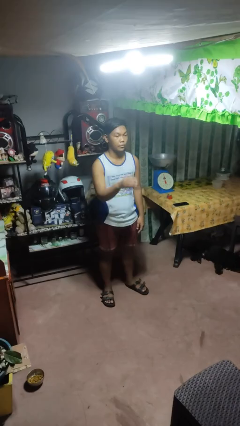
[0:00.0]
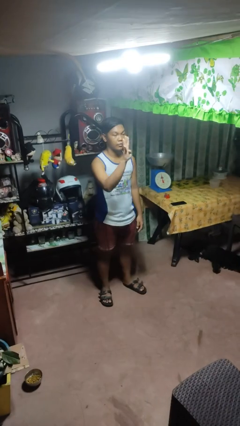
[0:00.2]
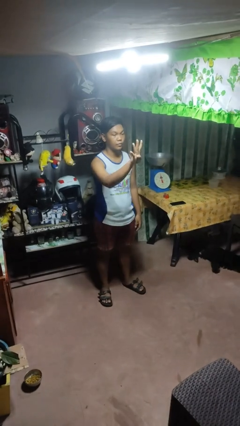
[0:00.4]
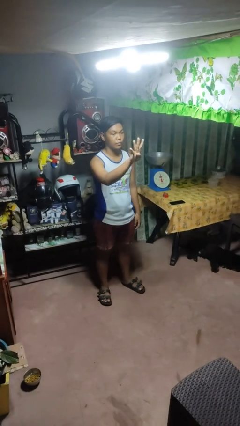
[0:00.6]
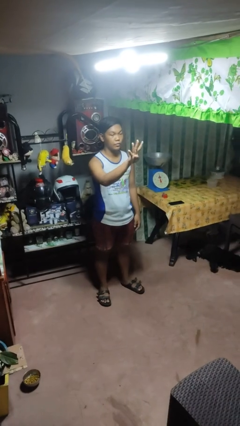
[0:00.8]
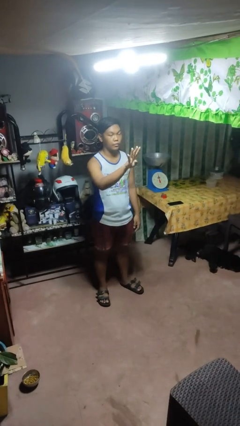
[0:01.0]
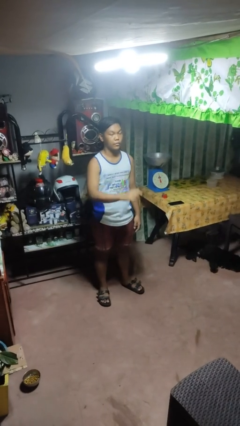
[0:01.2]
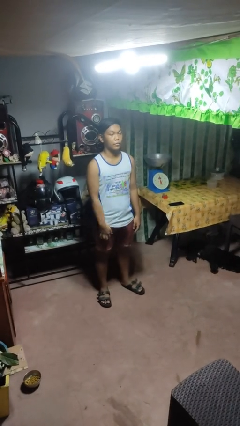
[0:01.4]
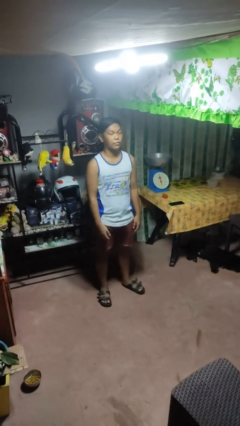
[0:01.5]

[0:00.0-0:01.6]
person gestures number four

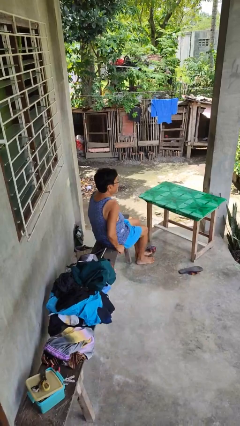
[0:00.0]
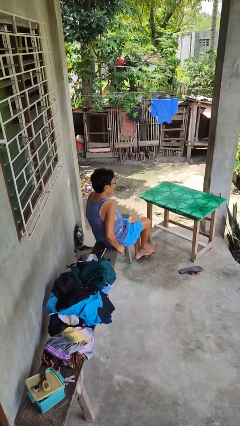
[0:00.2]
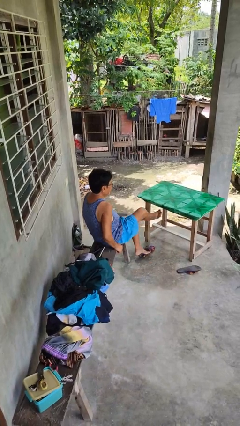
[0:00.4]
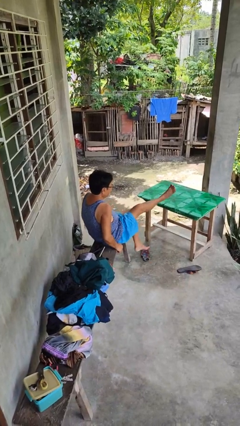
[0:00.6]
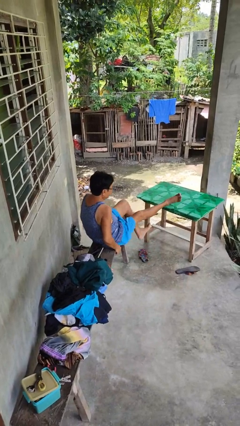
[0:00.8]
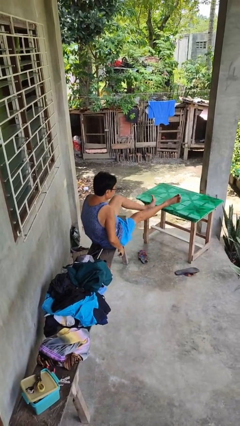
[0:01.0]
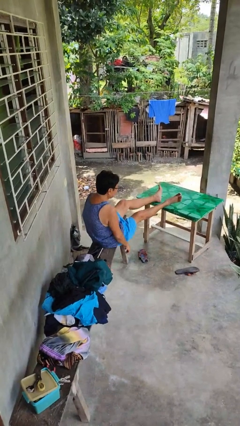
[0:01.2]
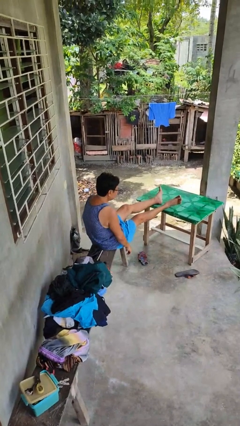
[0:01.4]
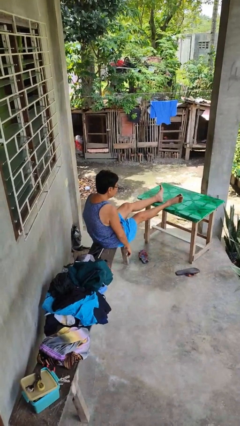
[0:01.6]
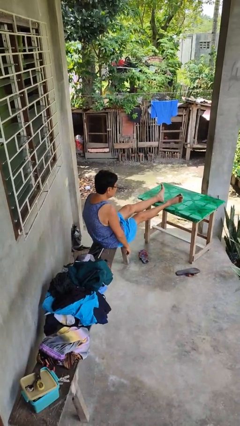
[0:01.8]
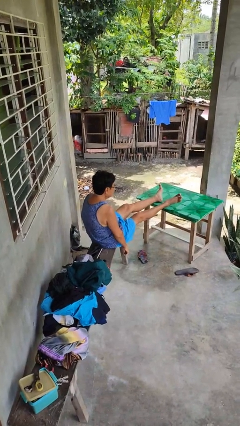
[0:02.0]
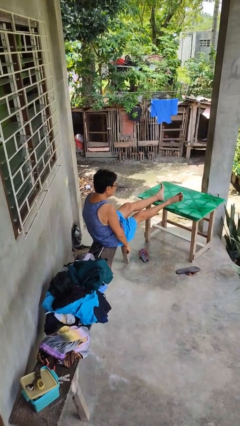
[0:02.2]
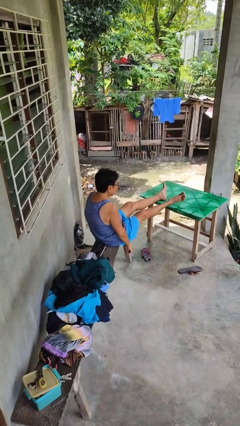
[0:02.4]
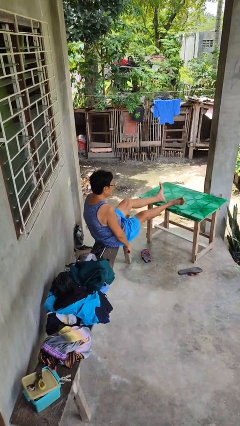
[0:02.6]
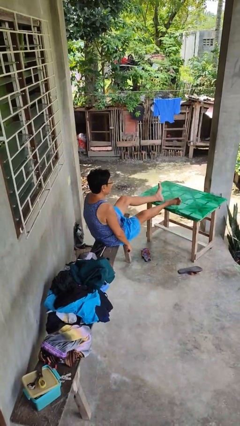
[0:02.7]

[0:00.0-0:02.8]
person puts feet up

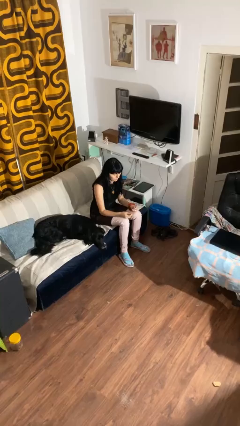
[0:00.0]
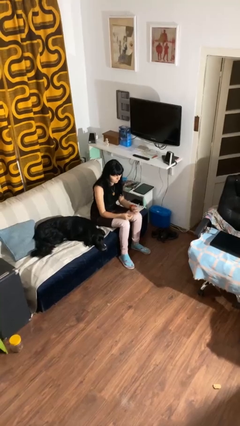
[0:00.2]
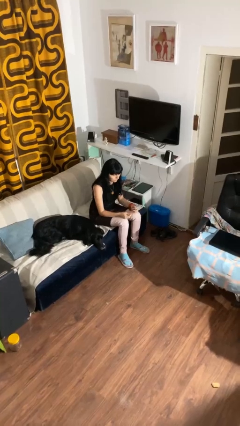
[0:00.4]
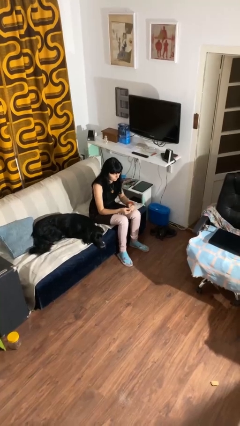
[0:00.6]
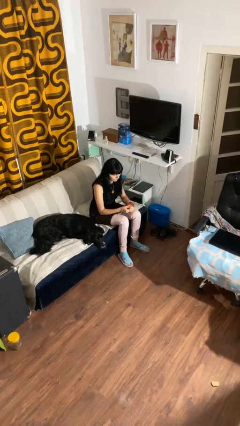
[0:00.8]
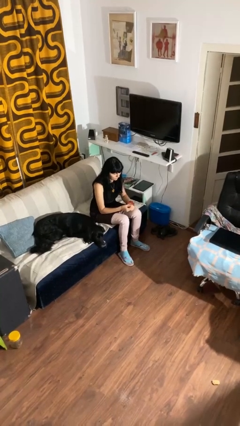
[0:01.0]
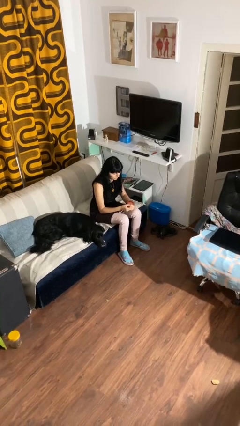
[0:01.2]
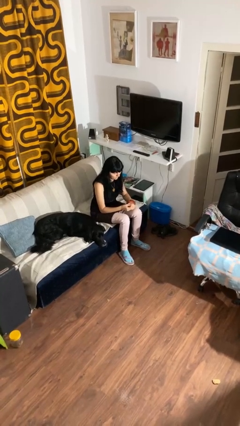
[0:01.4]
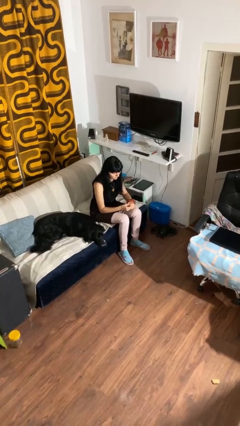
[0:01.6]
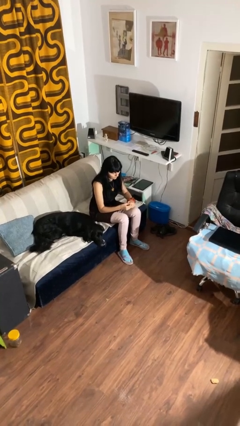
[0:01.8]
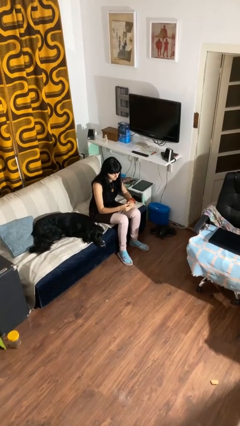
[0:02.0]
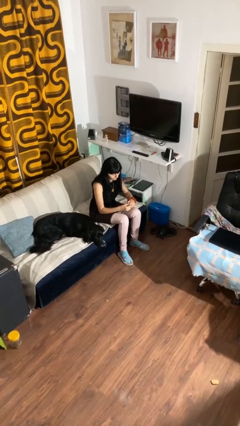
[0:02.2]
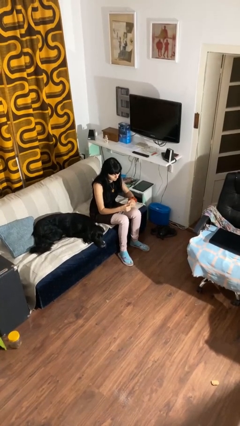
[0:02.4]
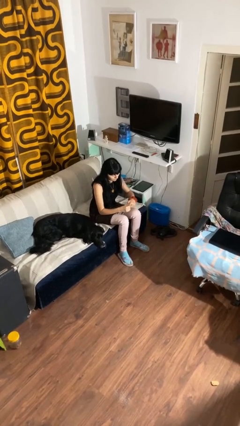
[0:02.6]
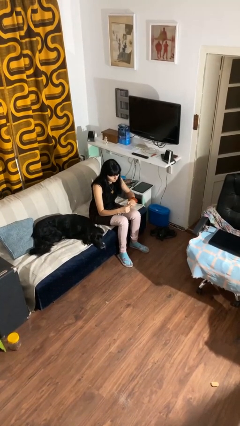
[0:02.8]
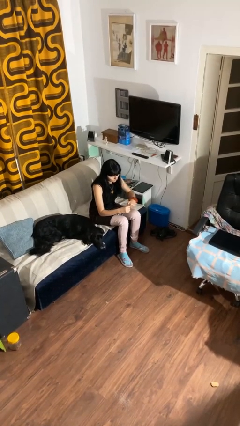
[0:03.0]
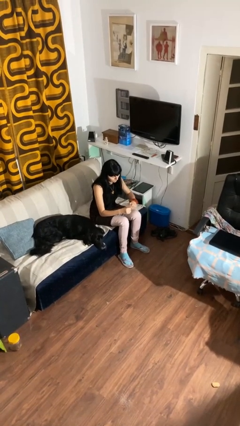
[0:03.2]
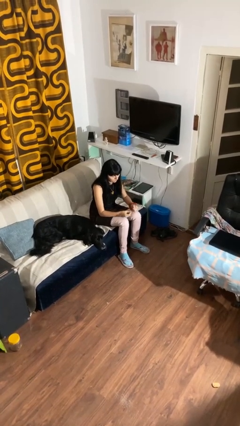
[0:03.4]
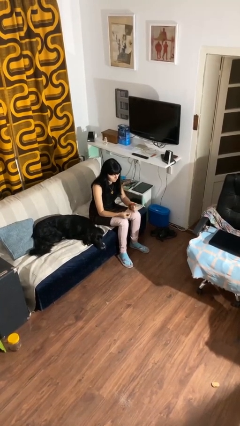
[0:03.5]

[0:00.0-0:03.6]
person clips fingernails

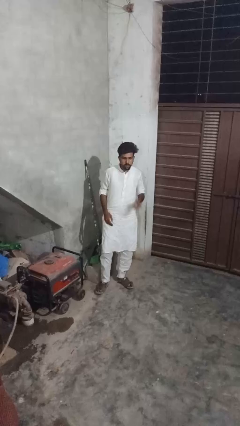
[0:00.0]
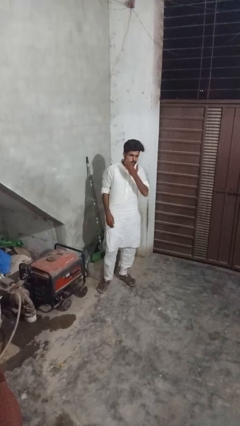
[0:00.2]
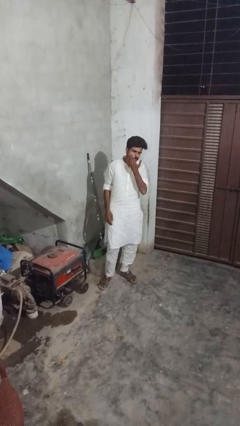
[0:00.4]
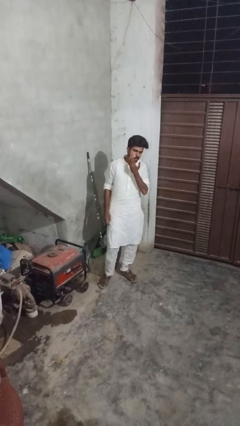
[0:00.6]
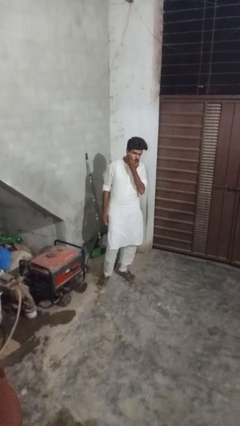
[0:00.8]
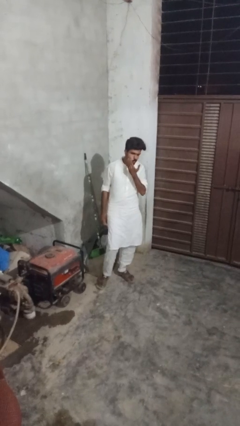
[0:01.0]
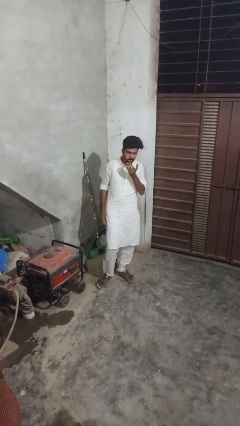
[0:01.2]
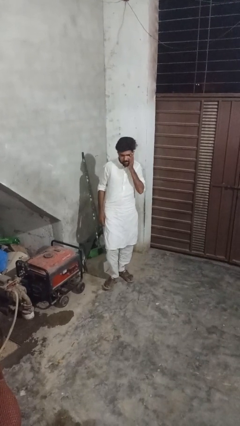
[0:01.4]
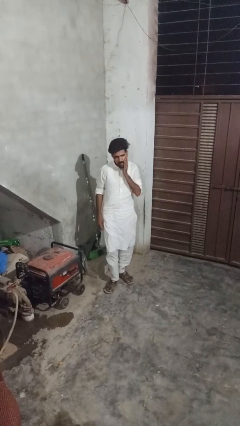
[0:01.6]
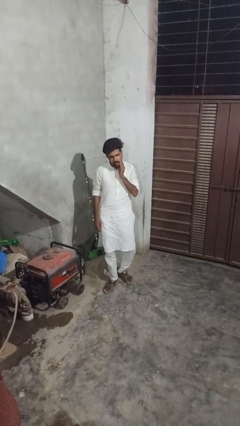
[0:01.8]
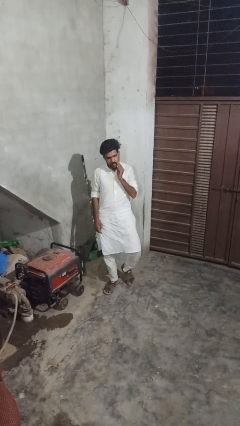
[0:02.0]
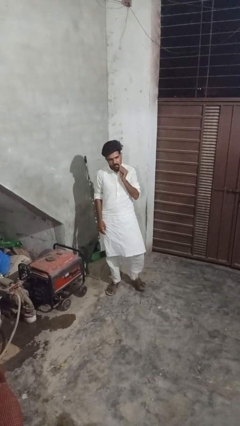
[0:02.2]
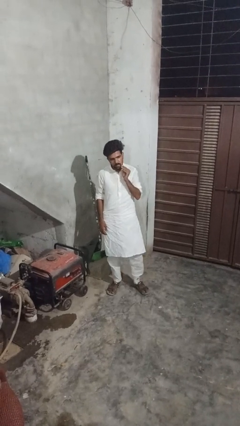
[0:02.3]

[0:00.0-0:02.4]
person scratches face

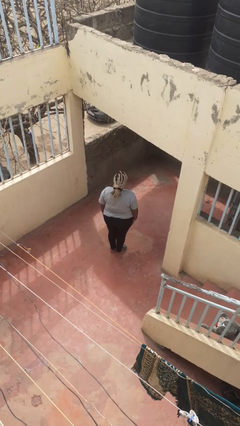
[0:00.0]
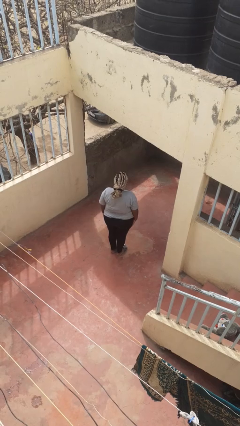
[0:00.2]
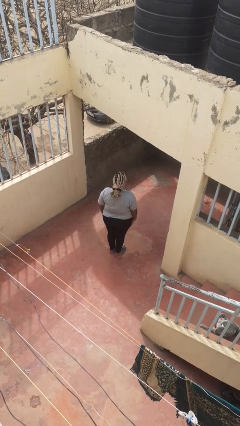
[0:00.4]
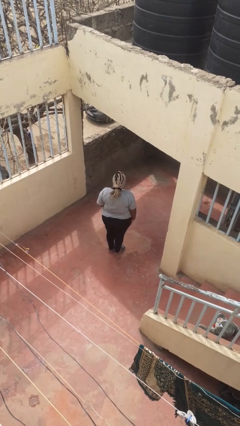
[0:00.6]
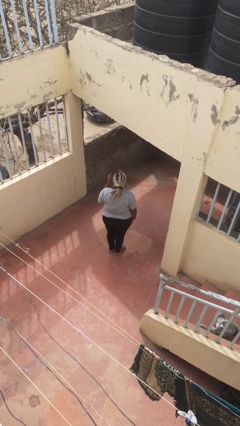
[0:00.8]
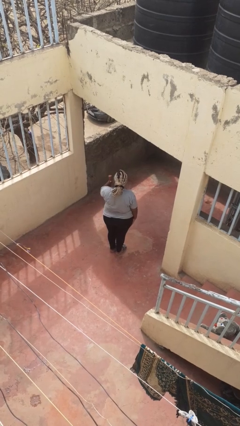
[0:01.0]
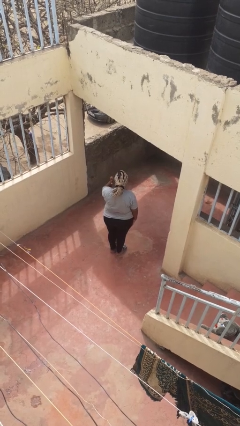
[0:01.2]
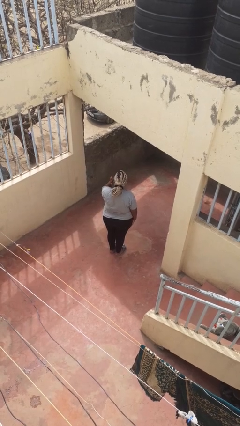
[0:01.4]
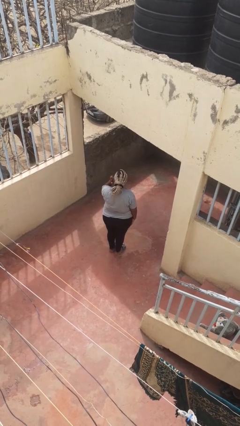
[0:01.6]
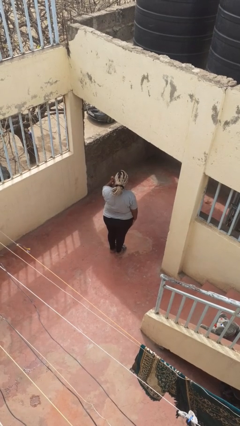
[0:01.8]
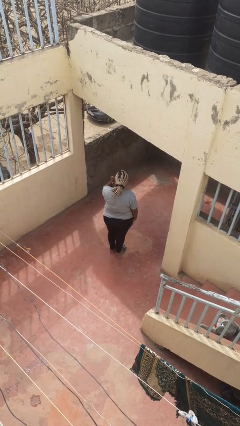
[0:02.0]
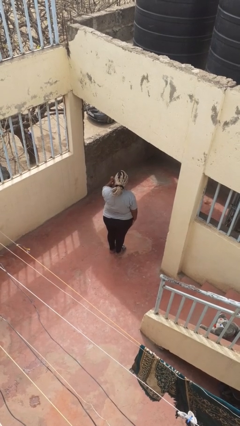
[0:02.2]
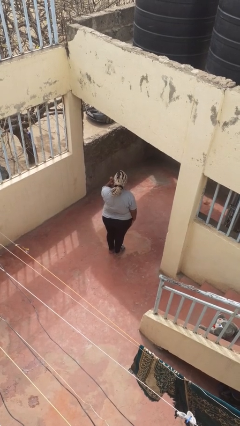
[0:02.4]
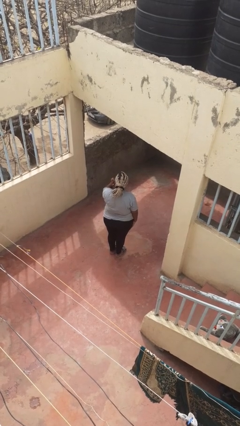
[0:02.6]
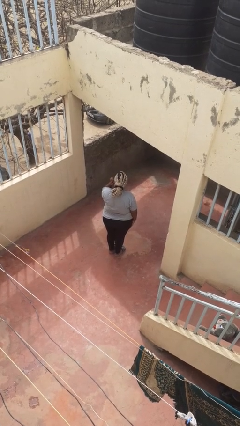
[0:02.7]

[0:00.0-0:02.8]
person gestures listen closely

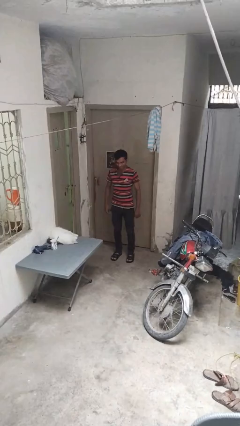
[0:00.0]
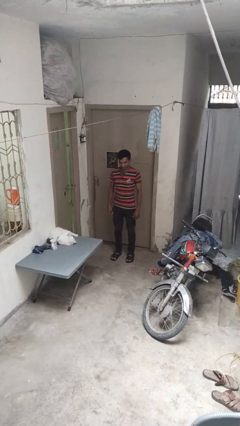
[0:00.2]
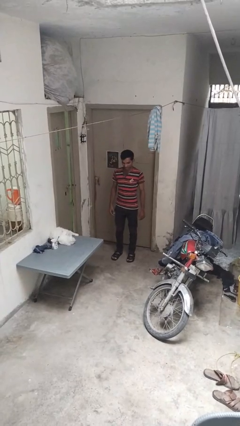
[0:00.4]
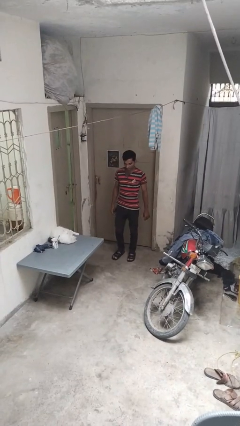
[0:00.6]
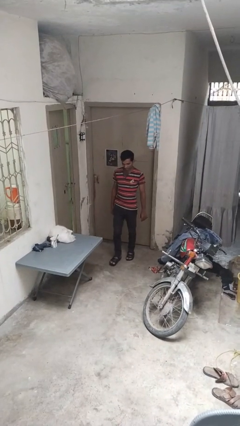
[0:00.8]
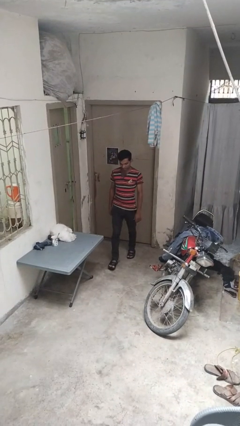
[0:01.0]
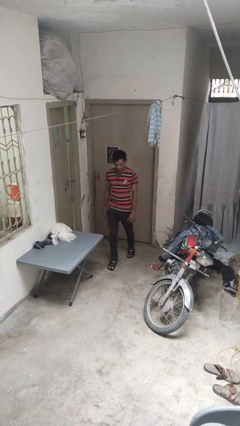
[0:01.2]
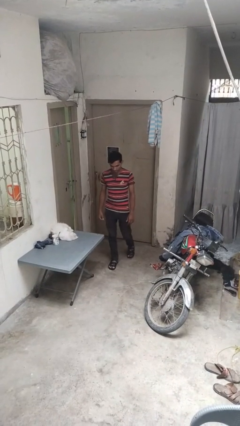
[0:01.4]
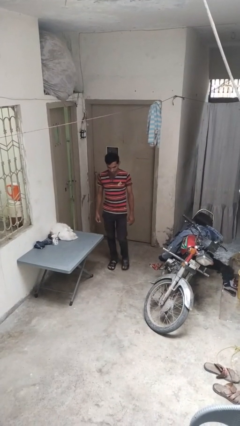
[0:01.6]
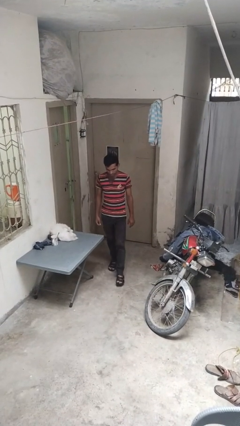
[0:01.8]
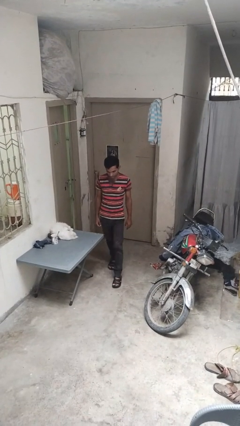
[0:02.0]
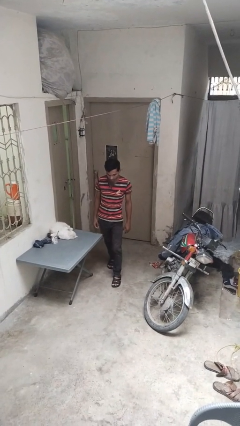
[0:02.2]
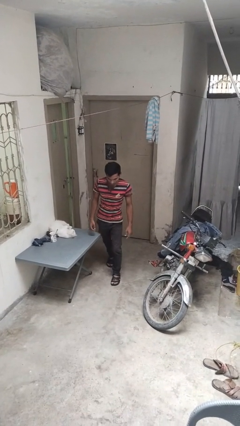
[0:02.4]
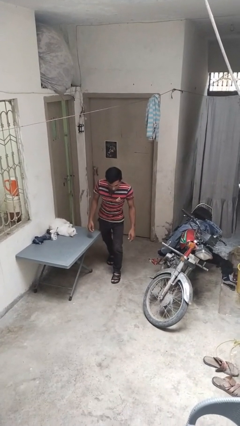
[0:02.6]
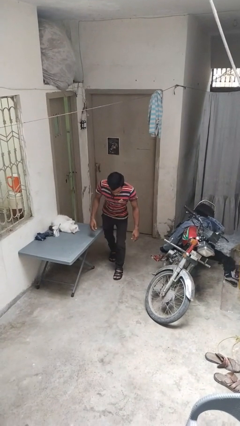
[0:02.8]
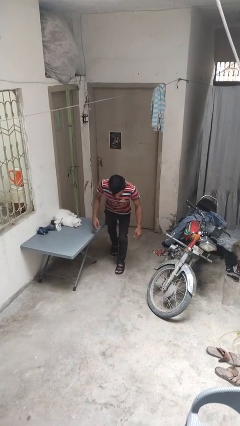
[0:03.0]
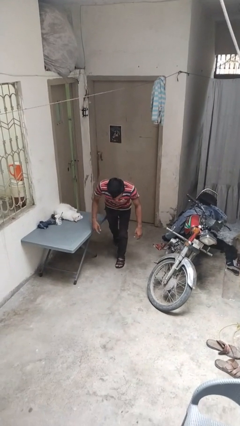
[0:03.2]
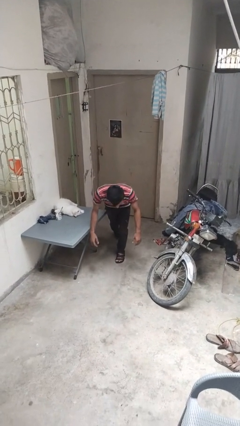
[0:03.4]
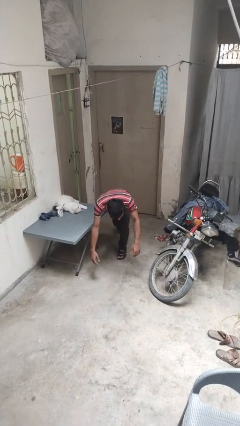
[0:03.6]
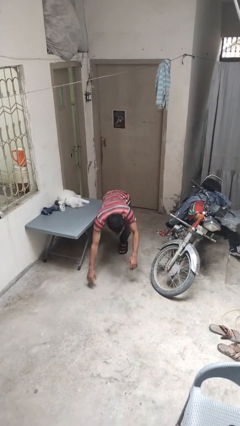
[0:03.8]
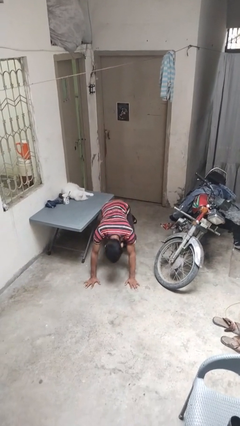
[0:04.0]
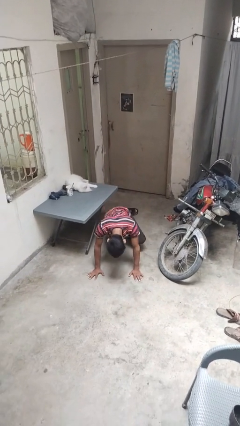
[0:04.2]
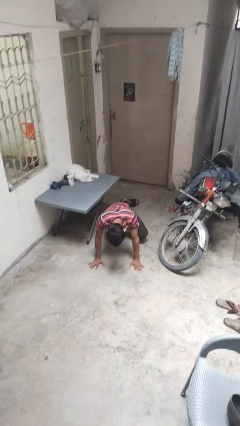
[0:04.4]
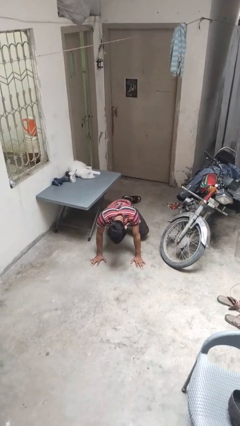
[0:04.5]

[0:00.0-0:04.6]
person trips on object on floor
